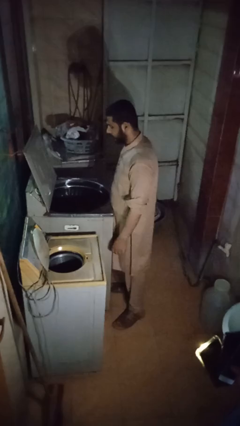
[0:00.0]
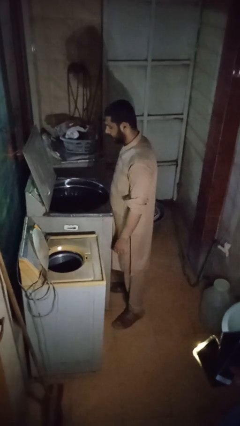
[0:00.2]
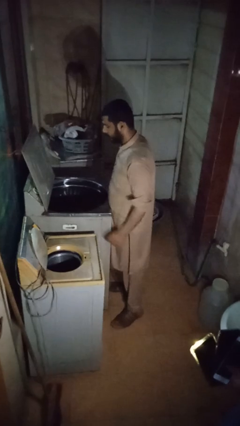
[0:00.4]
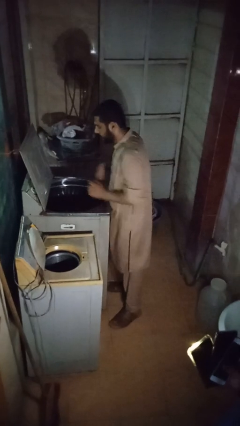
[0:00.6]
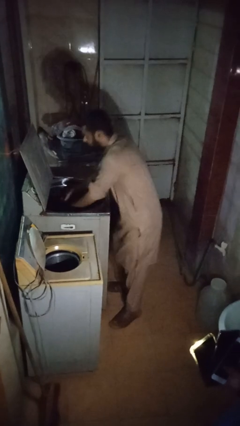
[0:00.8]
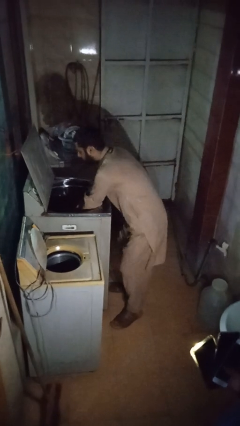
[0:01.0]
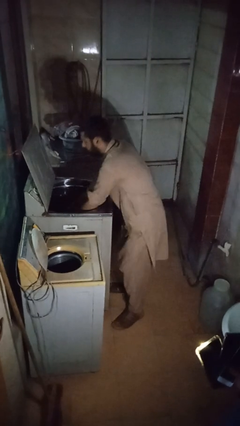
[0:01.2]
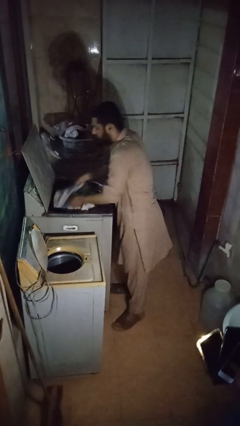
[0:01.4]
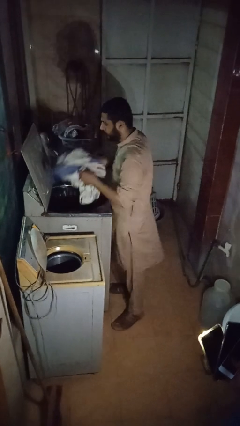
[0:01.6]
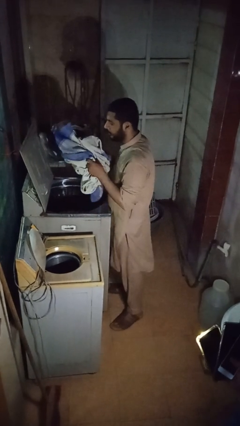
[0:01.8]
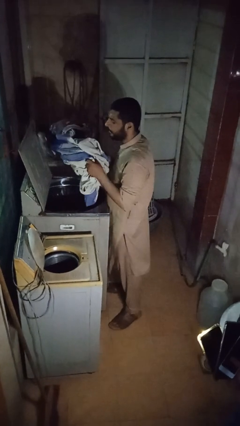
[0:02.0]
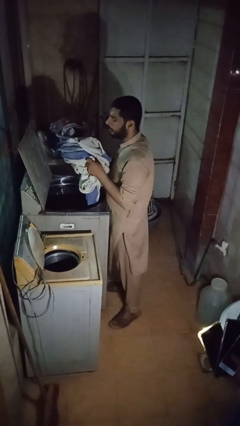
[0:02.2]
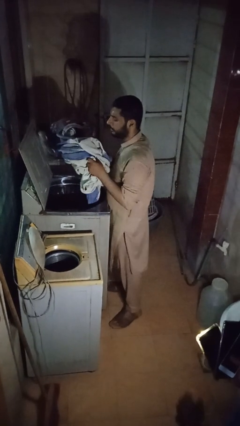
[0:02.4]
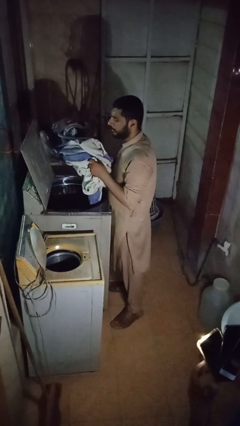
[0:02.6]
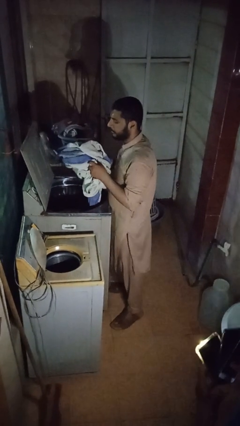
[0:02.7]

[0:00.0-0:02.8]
person unloads clotheswasher

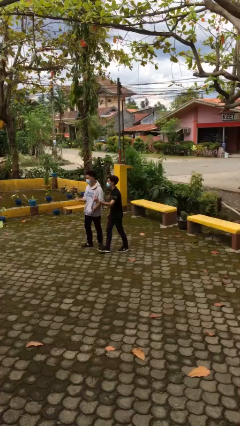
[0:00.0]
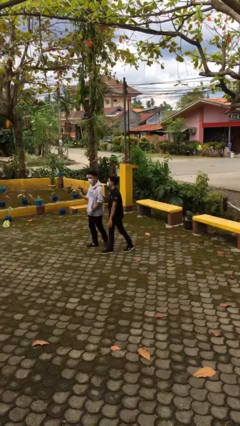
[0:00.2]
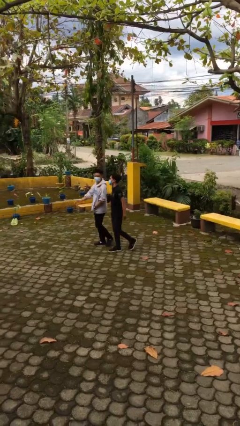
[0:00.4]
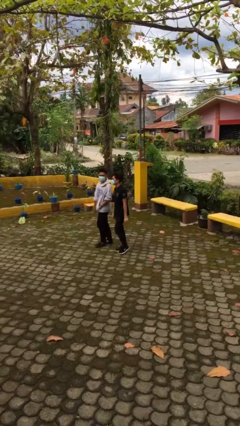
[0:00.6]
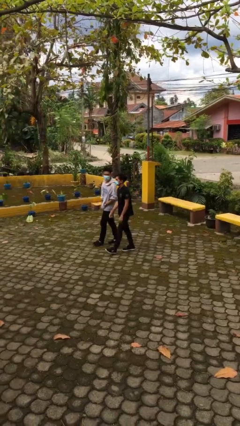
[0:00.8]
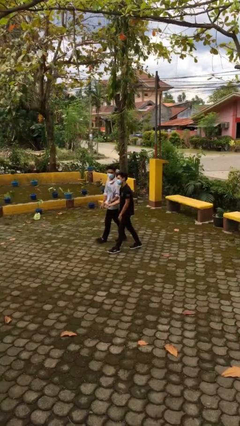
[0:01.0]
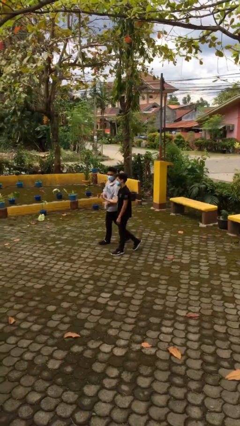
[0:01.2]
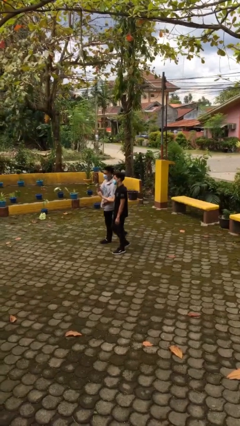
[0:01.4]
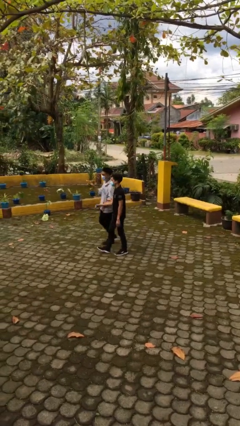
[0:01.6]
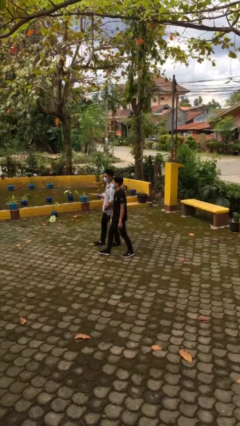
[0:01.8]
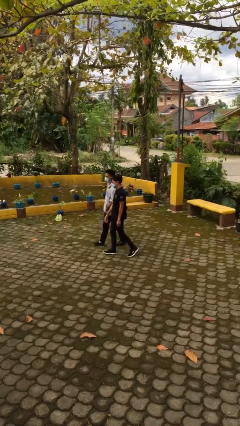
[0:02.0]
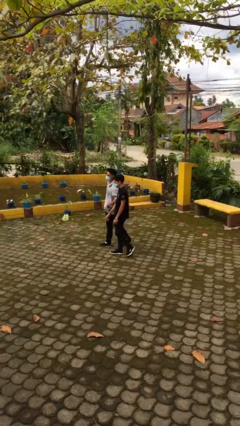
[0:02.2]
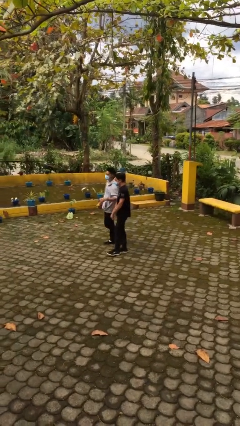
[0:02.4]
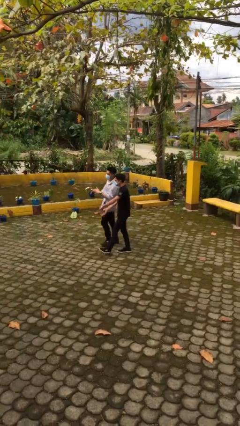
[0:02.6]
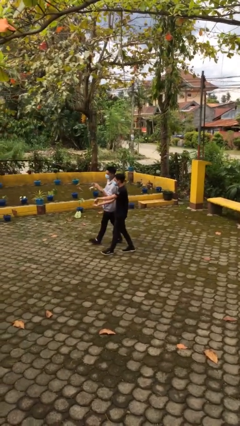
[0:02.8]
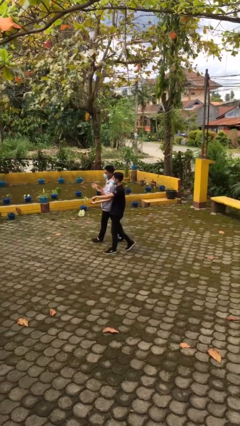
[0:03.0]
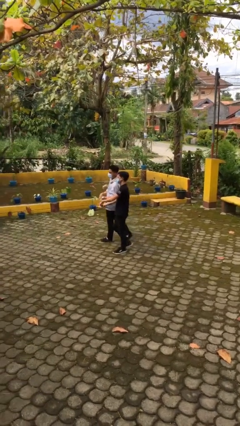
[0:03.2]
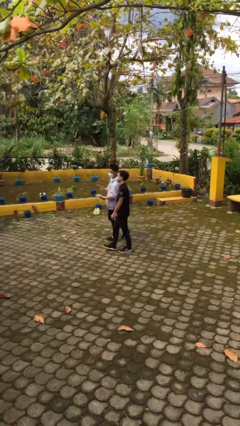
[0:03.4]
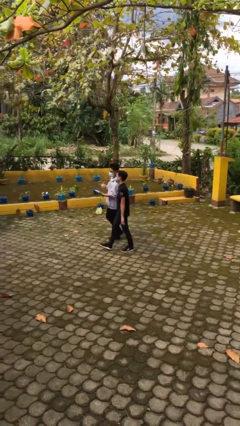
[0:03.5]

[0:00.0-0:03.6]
person talks to person

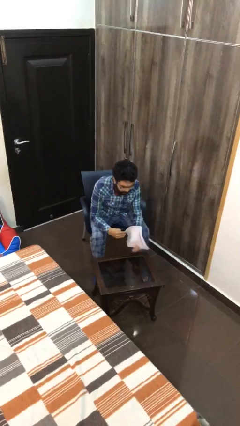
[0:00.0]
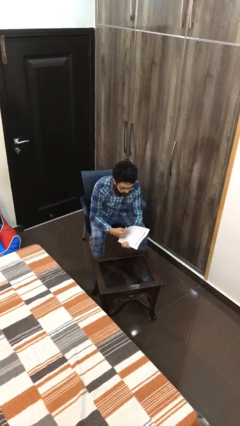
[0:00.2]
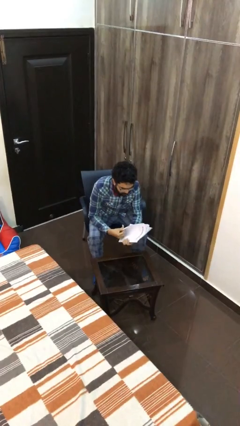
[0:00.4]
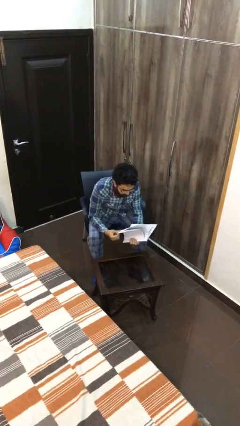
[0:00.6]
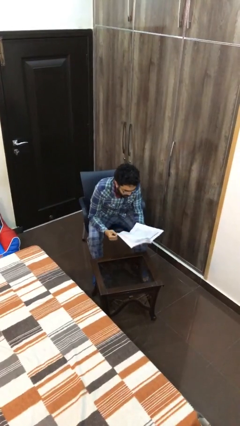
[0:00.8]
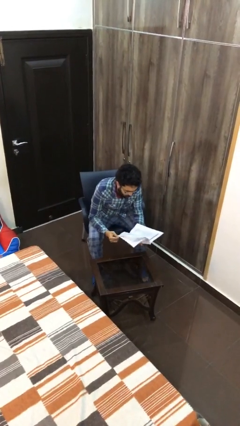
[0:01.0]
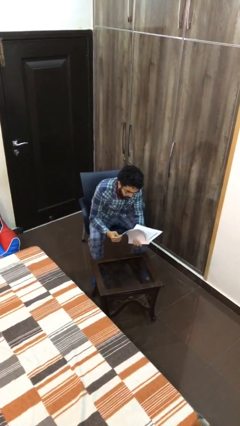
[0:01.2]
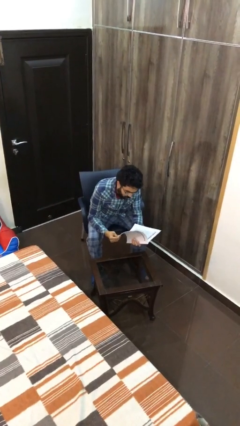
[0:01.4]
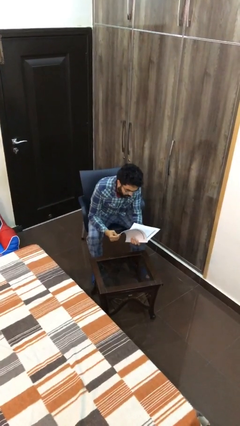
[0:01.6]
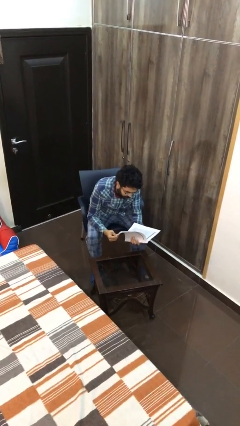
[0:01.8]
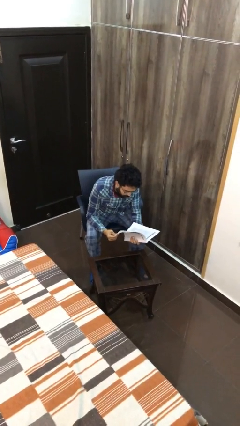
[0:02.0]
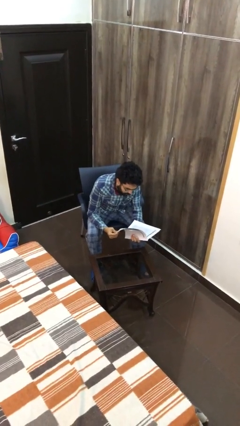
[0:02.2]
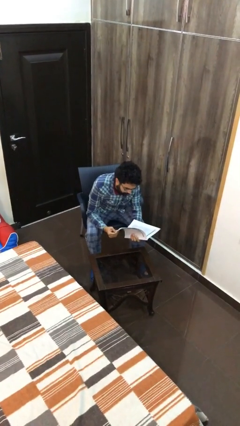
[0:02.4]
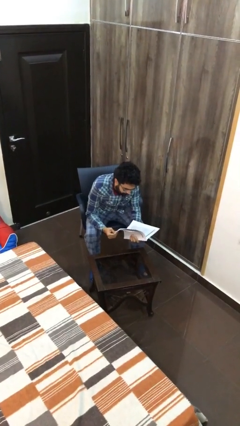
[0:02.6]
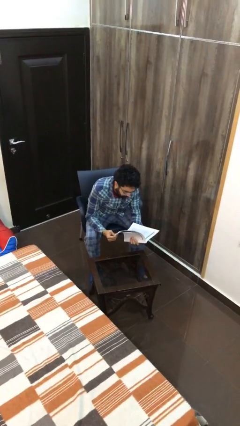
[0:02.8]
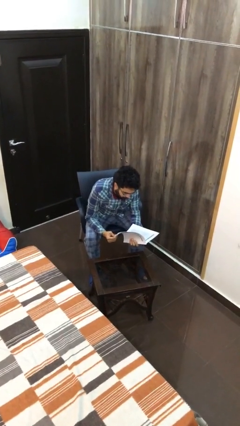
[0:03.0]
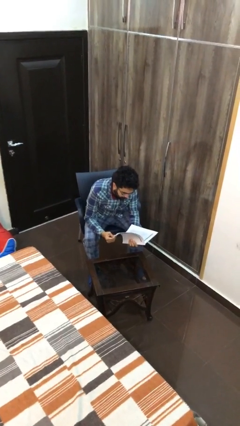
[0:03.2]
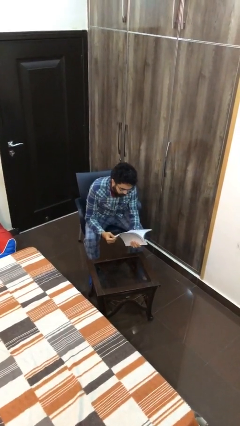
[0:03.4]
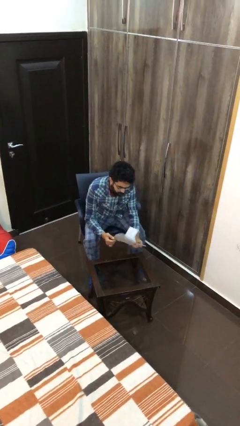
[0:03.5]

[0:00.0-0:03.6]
person reads document

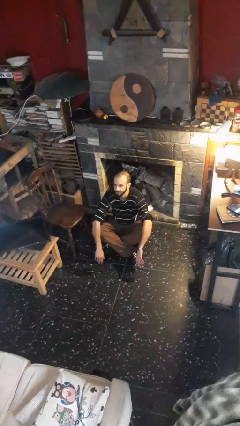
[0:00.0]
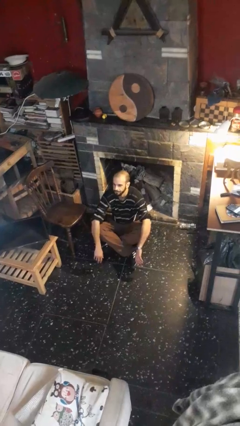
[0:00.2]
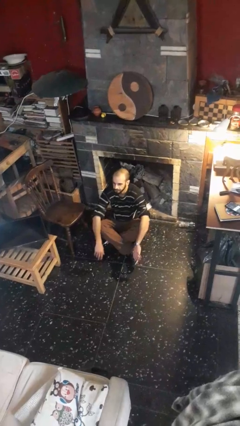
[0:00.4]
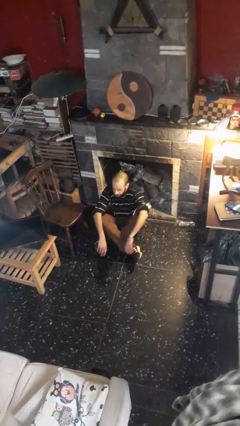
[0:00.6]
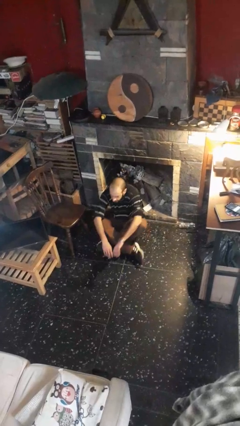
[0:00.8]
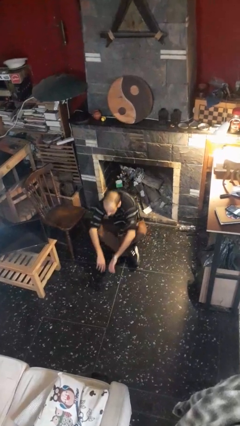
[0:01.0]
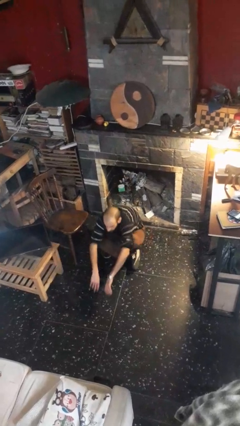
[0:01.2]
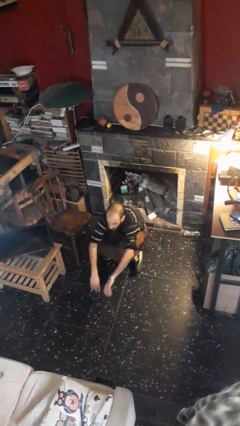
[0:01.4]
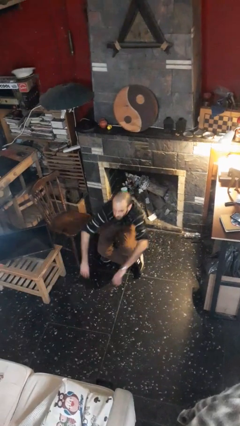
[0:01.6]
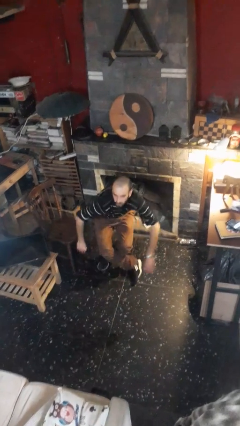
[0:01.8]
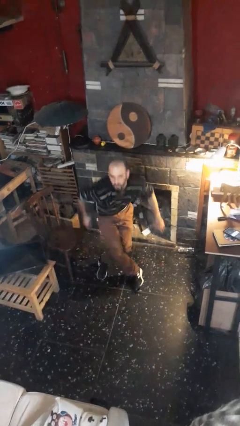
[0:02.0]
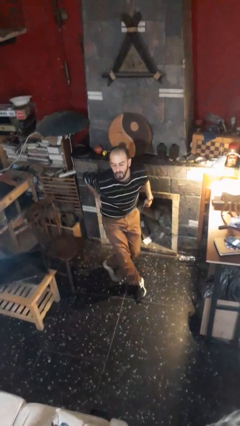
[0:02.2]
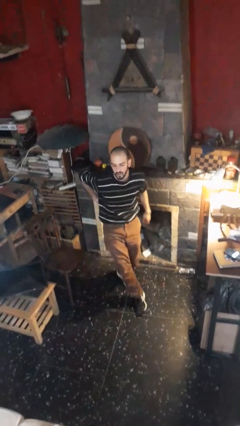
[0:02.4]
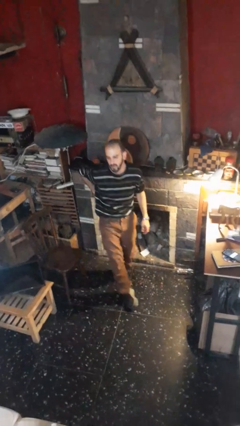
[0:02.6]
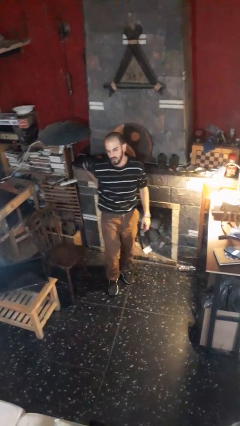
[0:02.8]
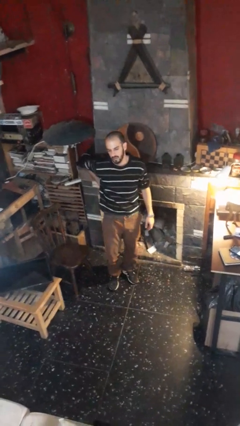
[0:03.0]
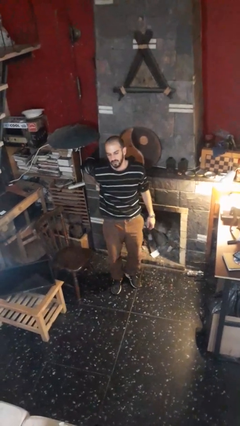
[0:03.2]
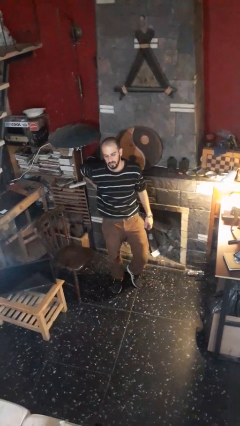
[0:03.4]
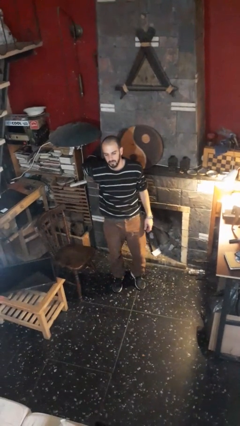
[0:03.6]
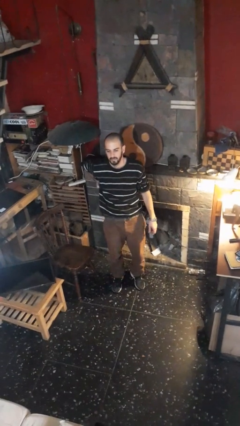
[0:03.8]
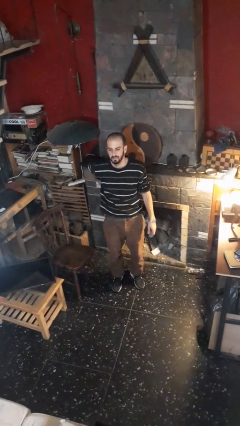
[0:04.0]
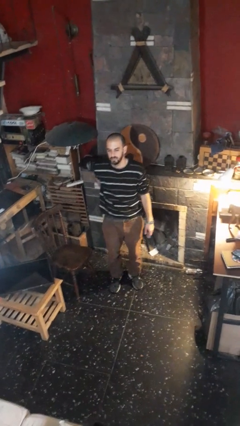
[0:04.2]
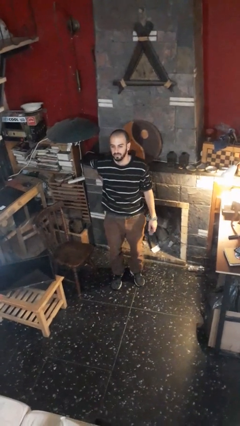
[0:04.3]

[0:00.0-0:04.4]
person stands up from floor

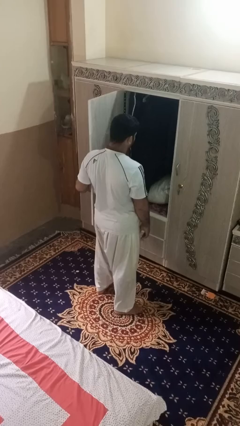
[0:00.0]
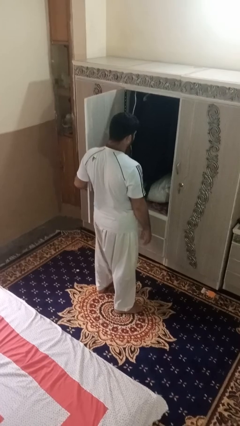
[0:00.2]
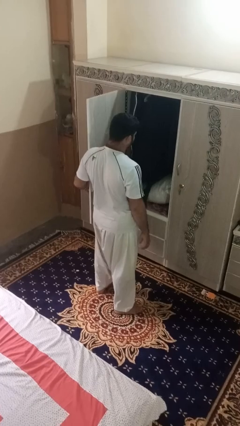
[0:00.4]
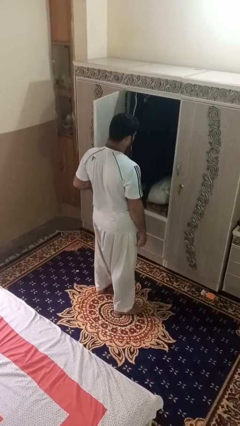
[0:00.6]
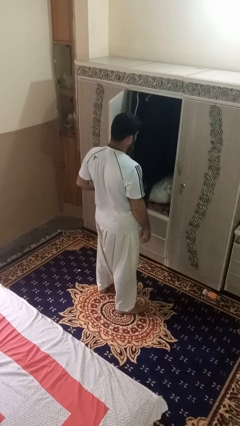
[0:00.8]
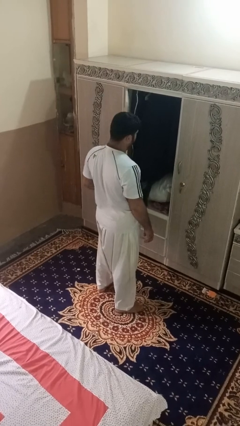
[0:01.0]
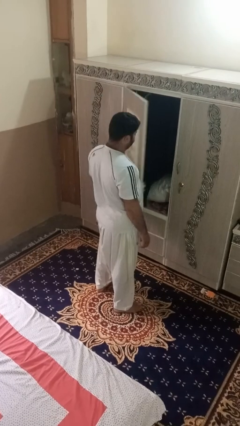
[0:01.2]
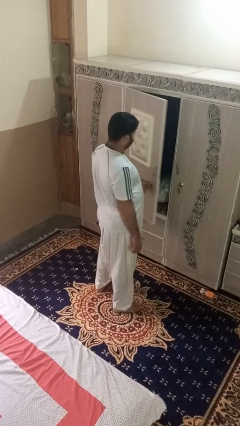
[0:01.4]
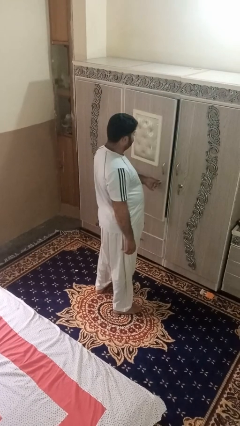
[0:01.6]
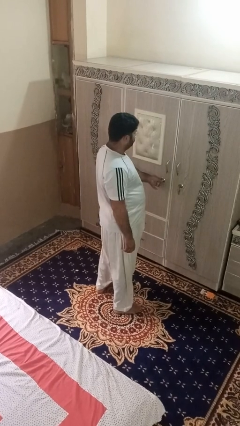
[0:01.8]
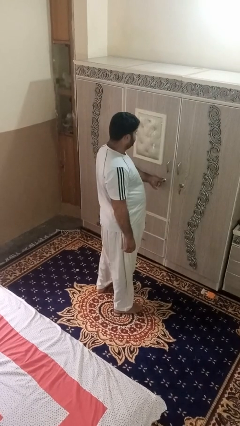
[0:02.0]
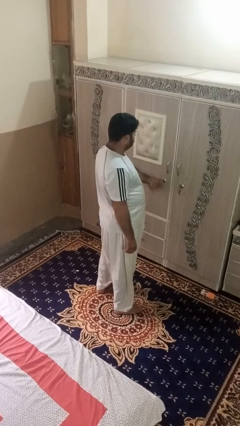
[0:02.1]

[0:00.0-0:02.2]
person closes dresser drawer

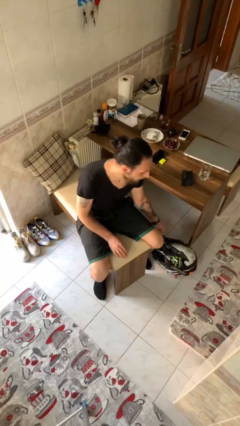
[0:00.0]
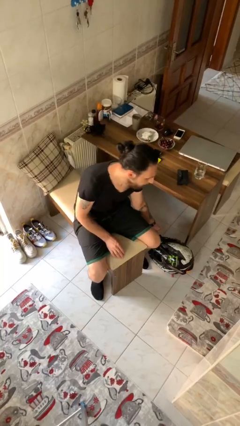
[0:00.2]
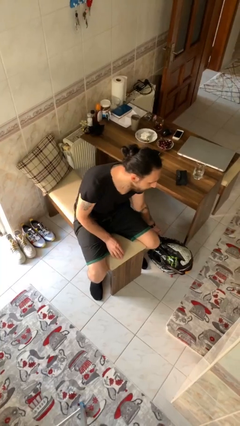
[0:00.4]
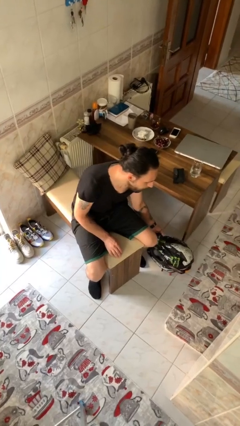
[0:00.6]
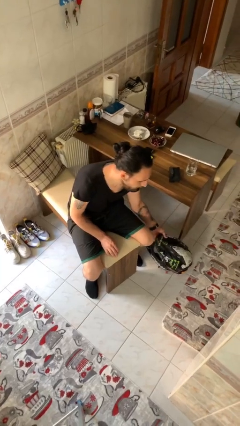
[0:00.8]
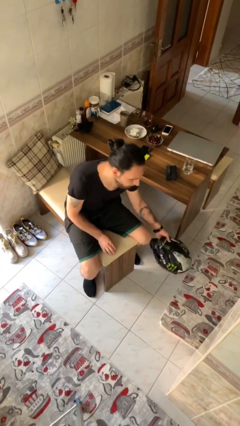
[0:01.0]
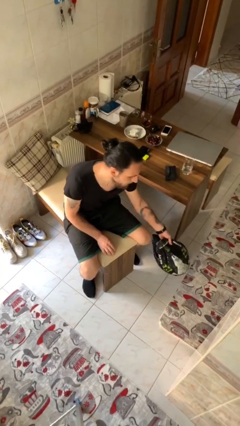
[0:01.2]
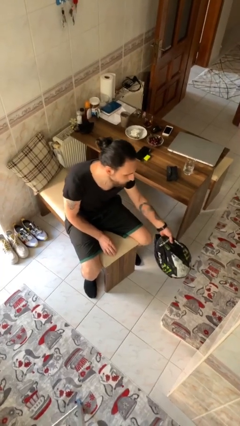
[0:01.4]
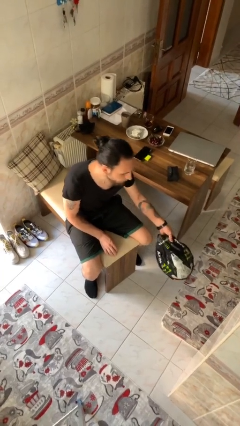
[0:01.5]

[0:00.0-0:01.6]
person picks up object from floor
